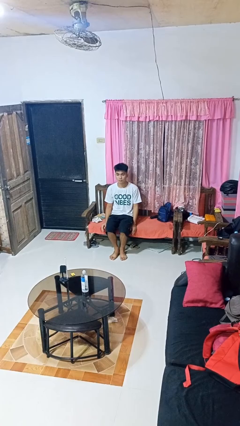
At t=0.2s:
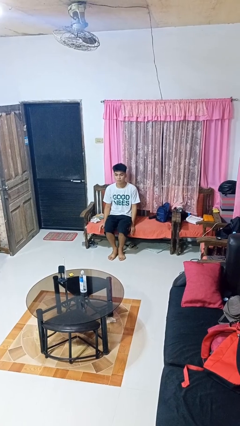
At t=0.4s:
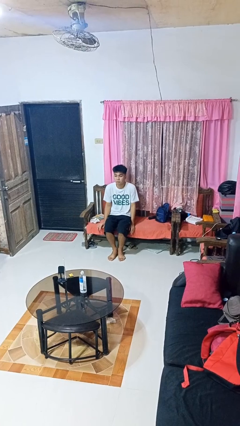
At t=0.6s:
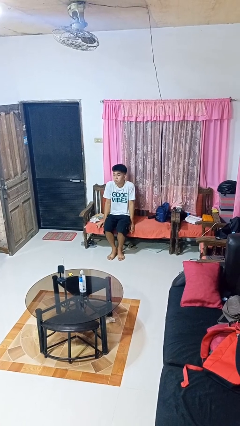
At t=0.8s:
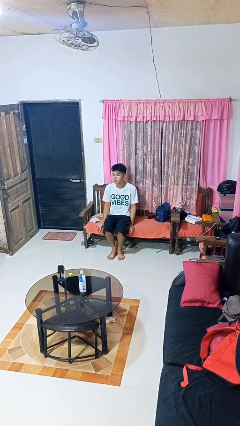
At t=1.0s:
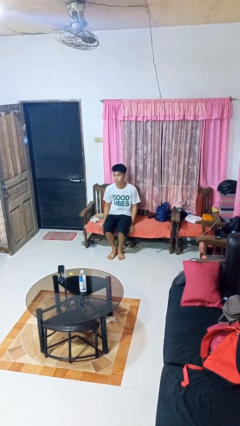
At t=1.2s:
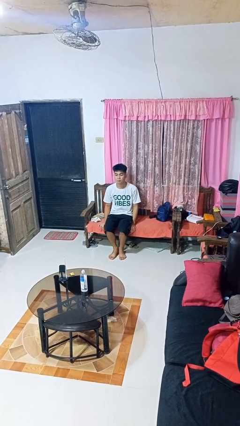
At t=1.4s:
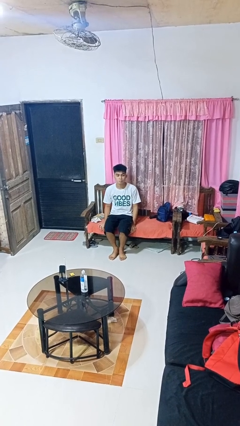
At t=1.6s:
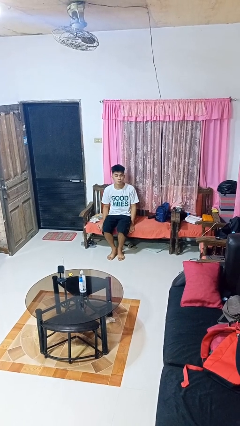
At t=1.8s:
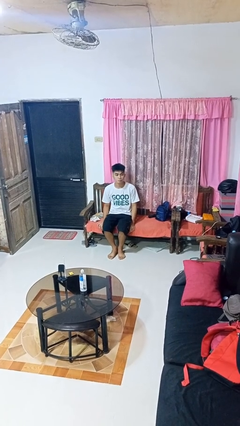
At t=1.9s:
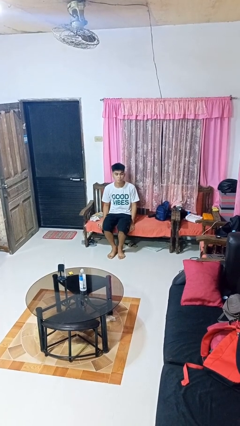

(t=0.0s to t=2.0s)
person shrugs

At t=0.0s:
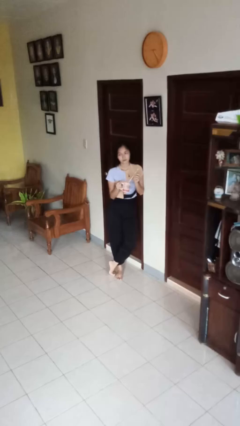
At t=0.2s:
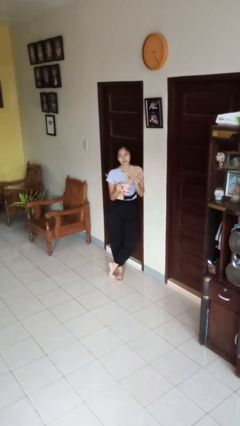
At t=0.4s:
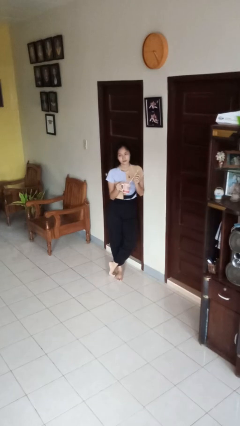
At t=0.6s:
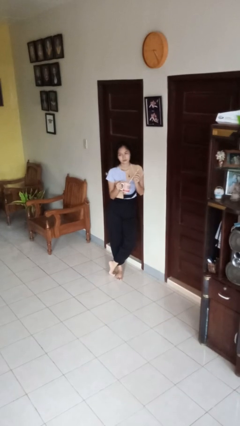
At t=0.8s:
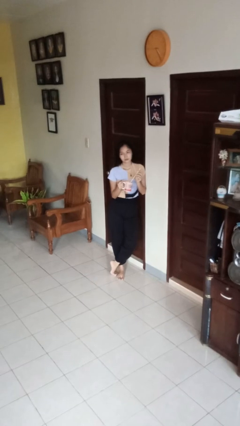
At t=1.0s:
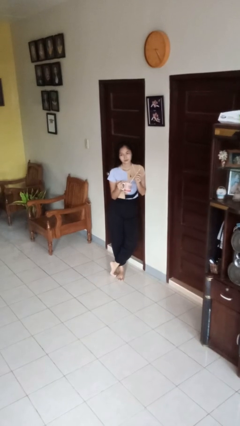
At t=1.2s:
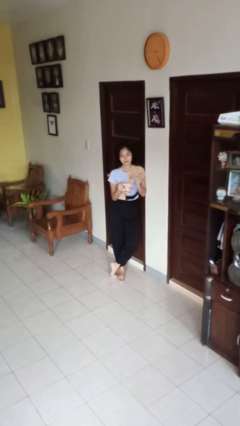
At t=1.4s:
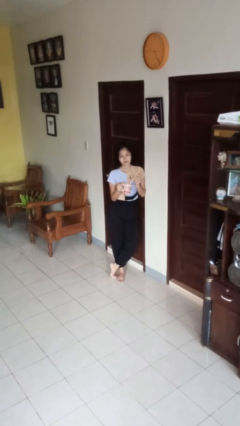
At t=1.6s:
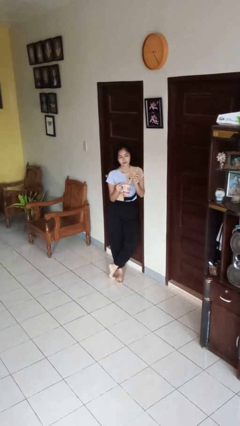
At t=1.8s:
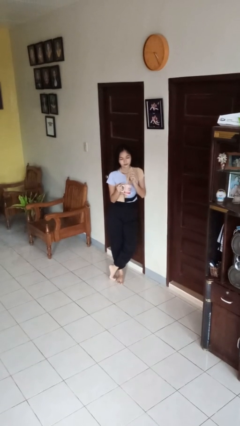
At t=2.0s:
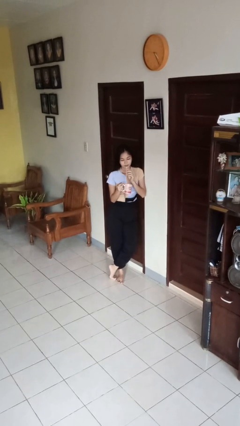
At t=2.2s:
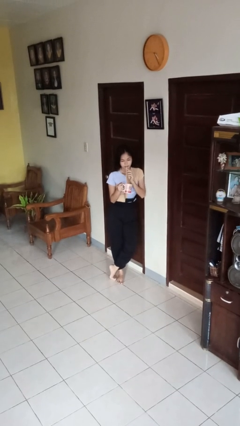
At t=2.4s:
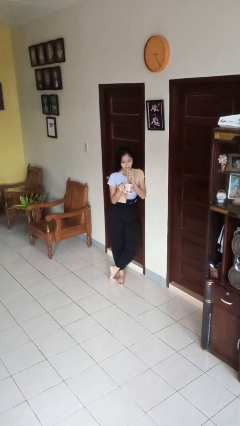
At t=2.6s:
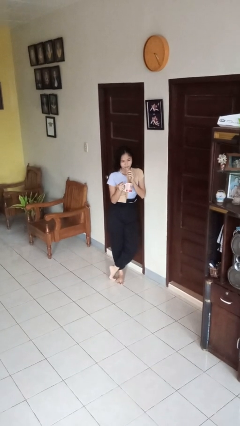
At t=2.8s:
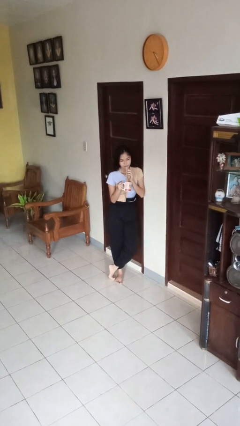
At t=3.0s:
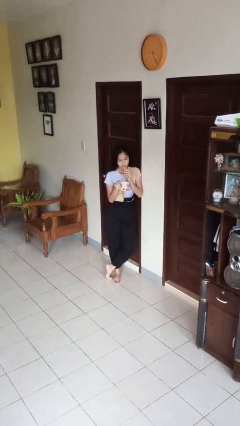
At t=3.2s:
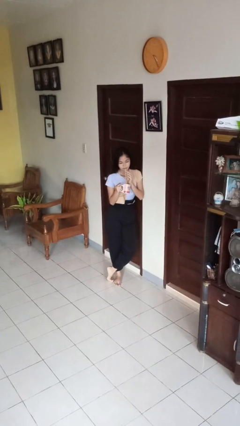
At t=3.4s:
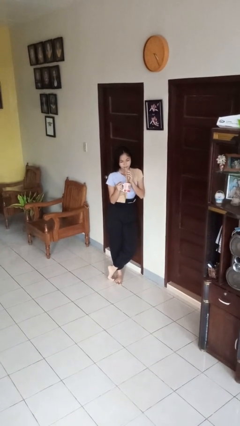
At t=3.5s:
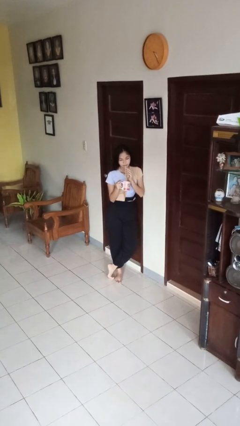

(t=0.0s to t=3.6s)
person drinks from straw

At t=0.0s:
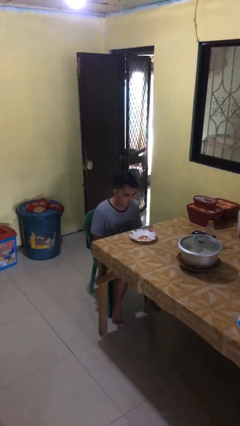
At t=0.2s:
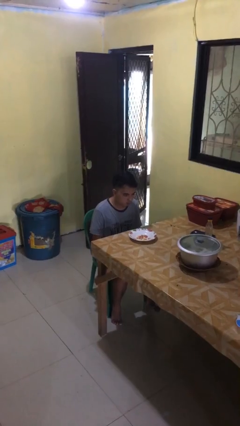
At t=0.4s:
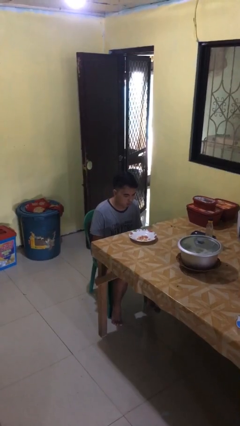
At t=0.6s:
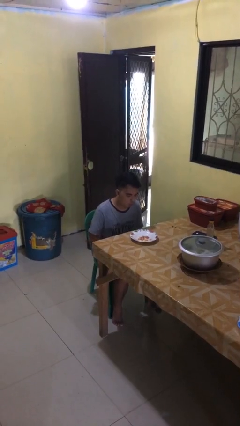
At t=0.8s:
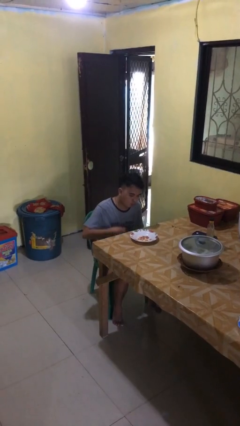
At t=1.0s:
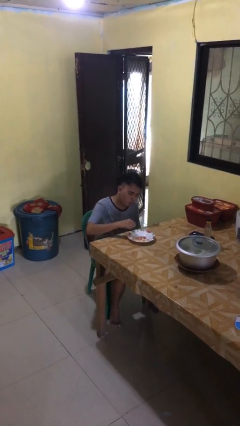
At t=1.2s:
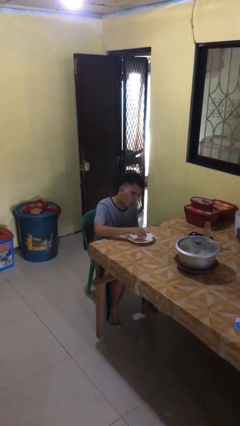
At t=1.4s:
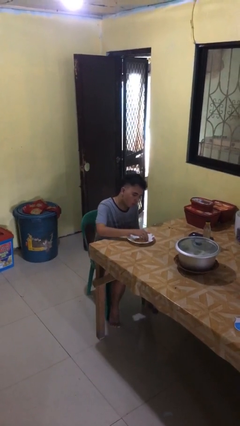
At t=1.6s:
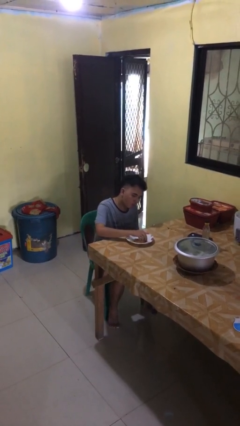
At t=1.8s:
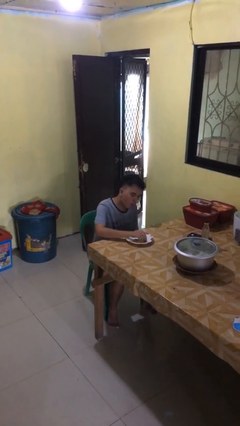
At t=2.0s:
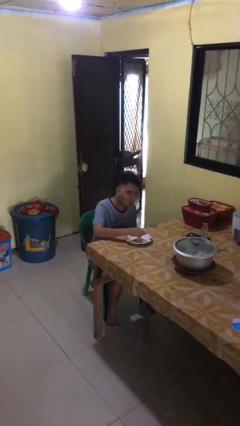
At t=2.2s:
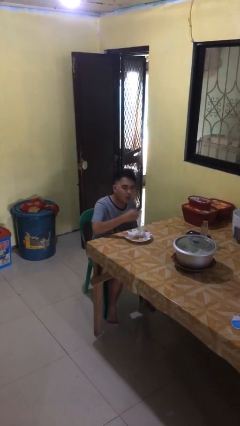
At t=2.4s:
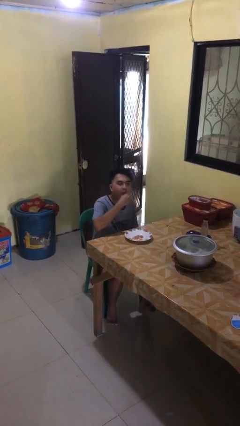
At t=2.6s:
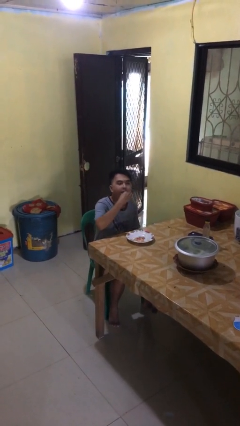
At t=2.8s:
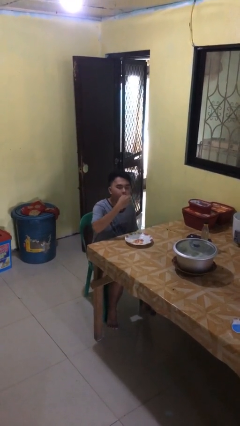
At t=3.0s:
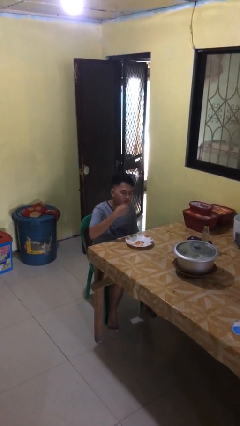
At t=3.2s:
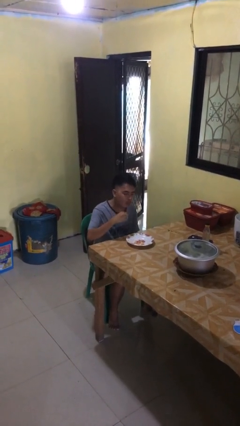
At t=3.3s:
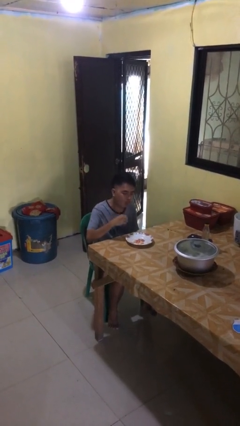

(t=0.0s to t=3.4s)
person eats with hands

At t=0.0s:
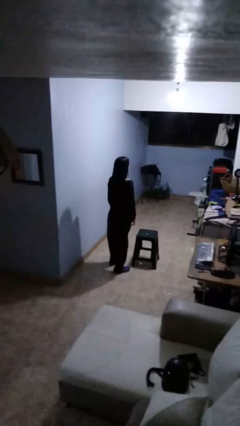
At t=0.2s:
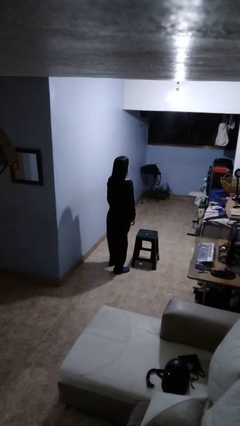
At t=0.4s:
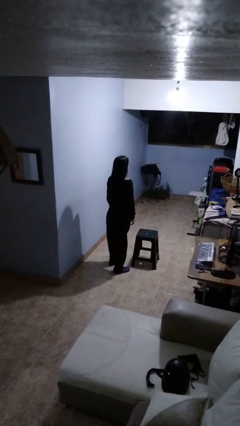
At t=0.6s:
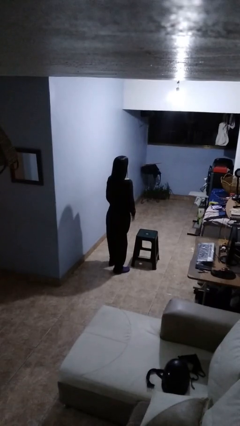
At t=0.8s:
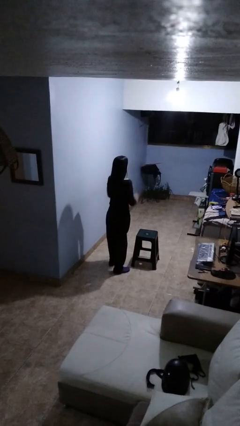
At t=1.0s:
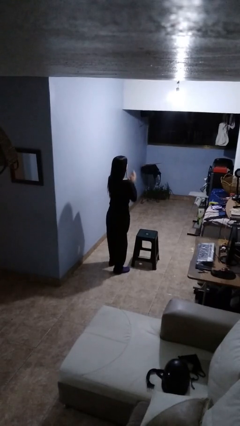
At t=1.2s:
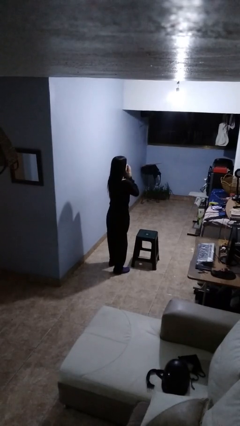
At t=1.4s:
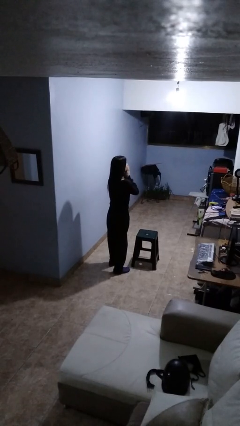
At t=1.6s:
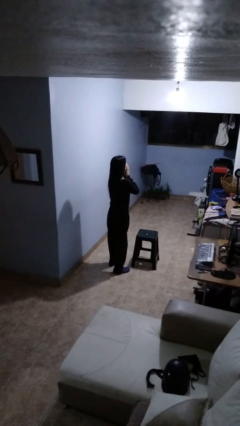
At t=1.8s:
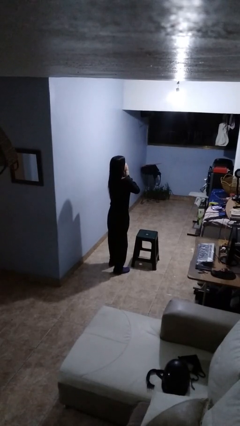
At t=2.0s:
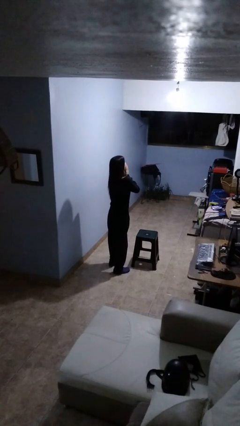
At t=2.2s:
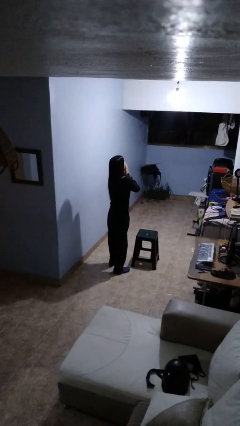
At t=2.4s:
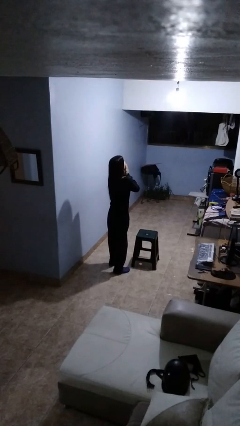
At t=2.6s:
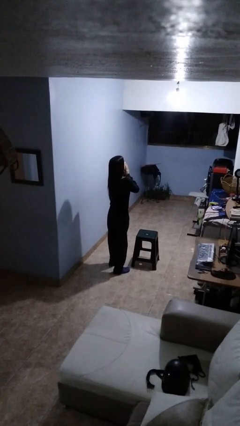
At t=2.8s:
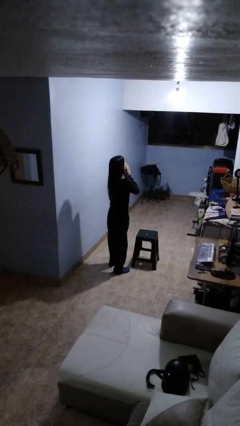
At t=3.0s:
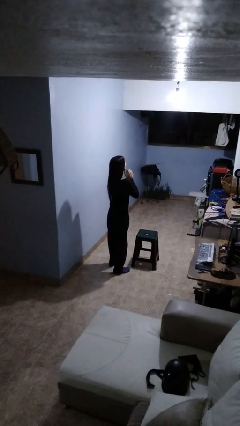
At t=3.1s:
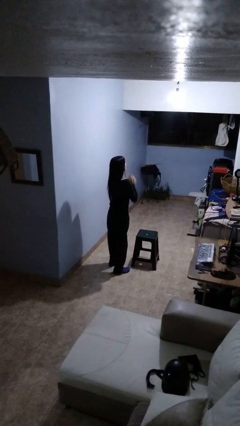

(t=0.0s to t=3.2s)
person yawns

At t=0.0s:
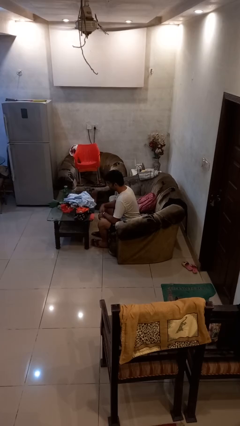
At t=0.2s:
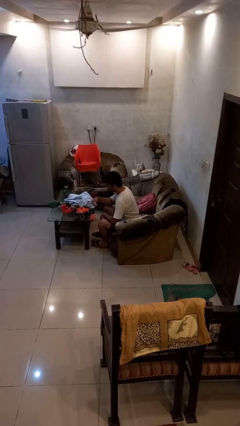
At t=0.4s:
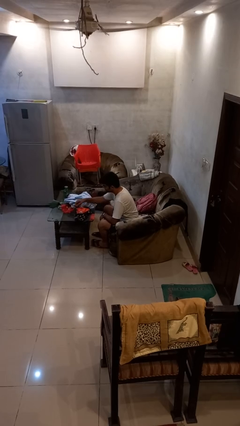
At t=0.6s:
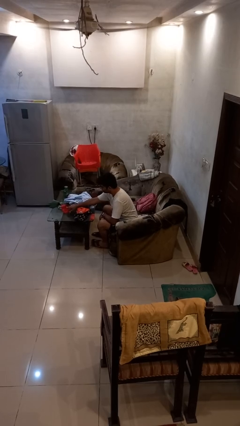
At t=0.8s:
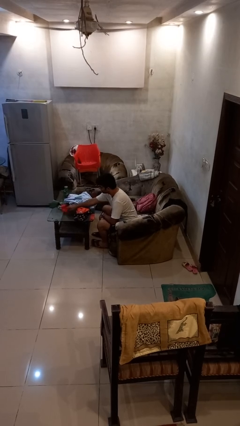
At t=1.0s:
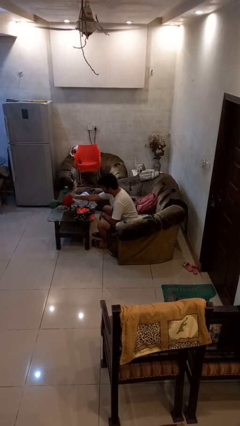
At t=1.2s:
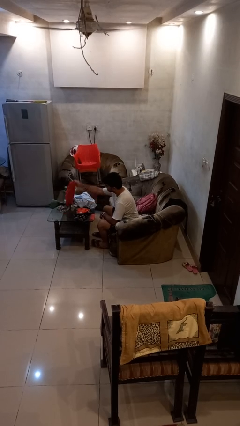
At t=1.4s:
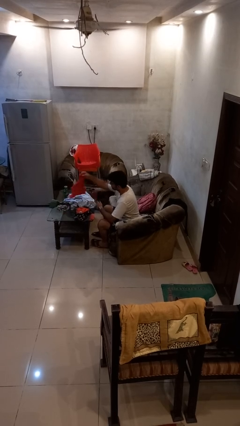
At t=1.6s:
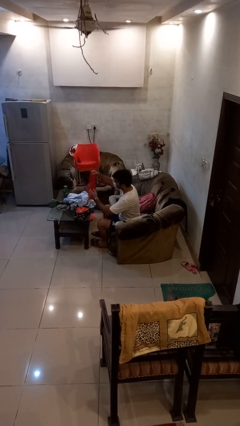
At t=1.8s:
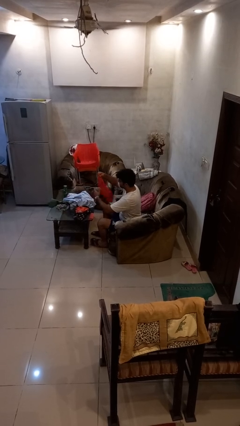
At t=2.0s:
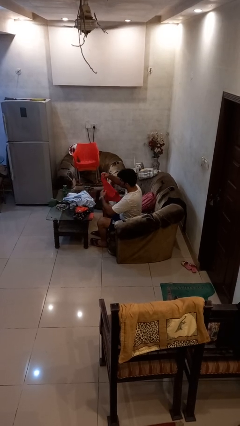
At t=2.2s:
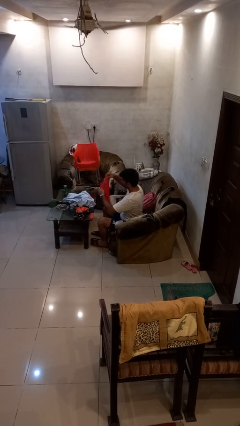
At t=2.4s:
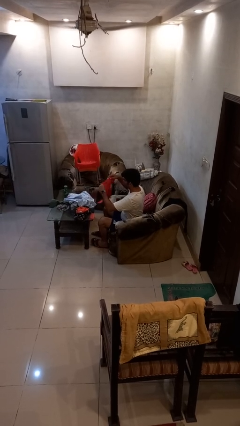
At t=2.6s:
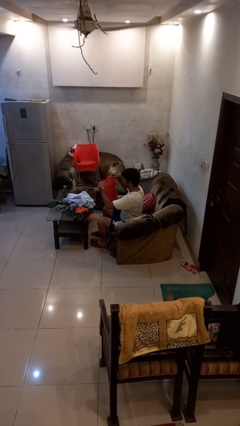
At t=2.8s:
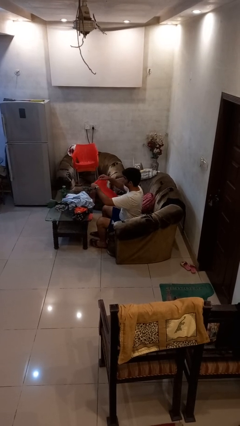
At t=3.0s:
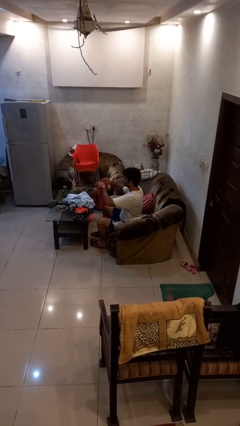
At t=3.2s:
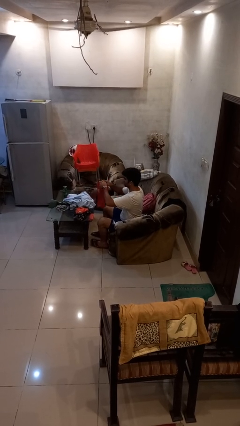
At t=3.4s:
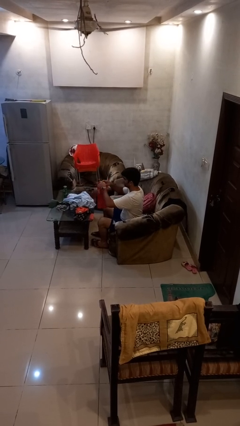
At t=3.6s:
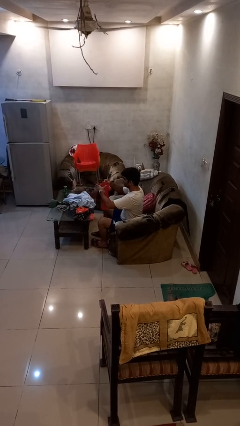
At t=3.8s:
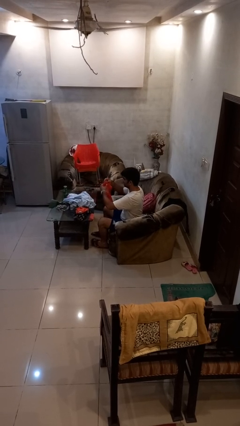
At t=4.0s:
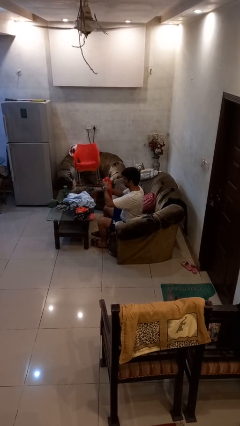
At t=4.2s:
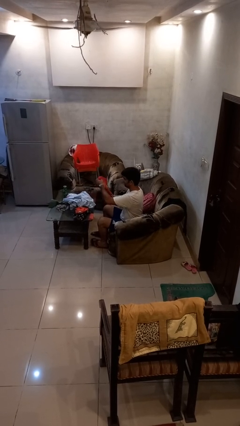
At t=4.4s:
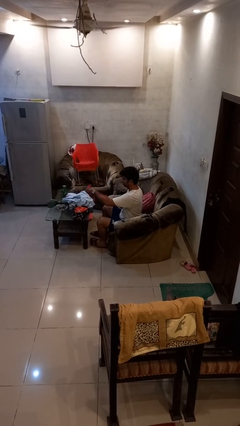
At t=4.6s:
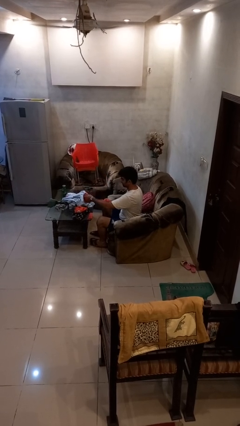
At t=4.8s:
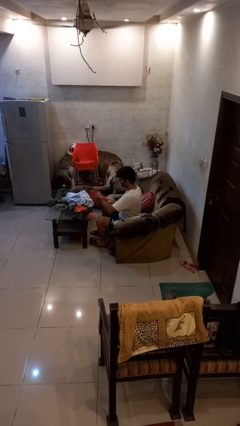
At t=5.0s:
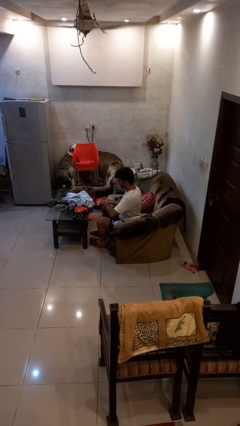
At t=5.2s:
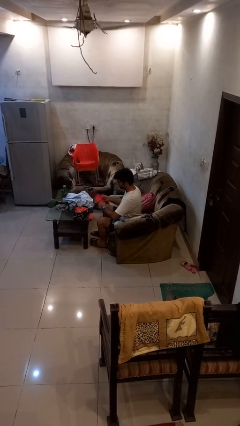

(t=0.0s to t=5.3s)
person folds shirt
